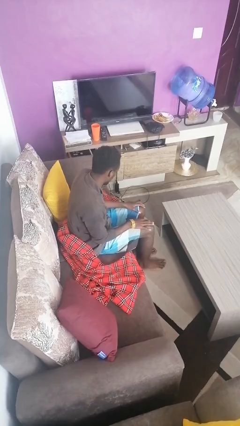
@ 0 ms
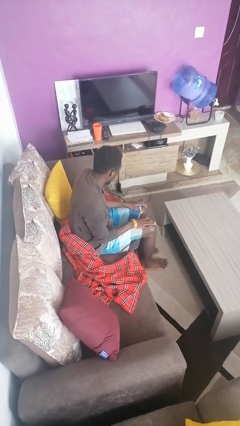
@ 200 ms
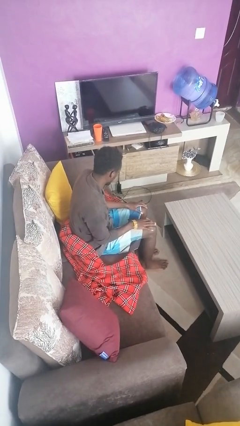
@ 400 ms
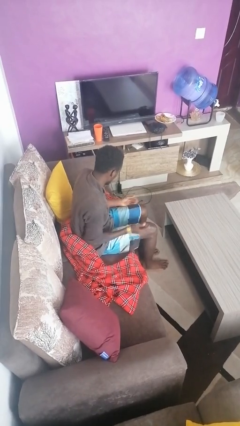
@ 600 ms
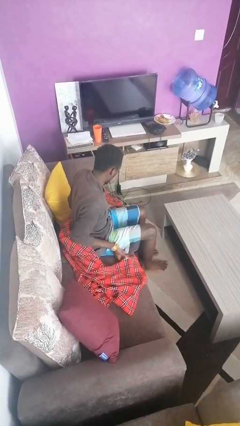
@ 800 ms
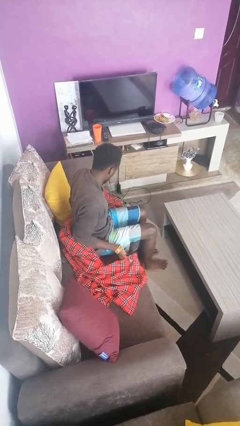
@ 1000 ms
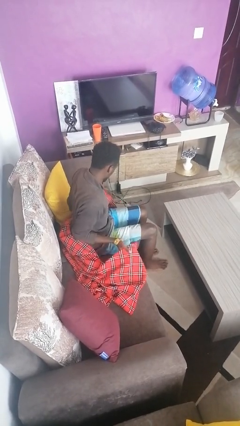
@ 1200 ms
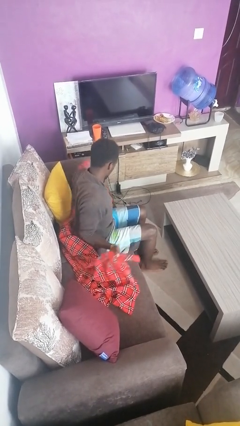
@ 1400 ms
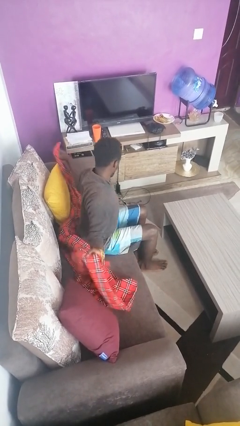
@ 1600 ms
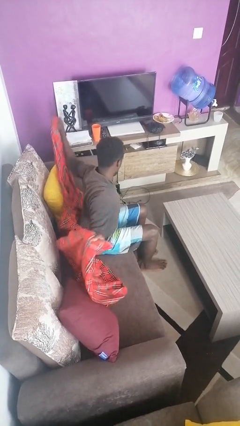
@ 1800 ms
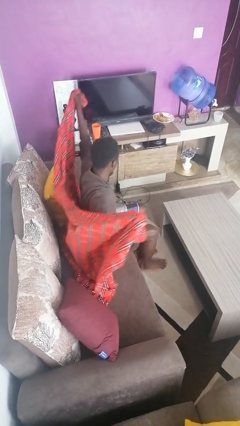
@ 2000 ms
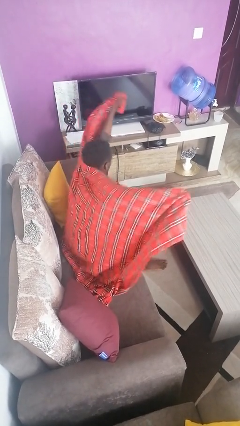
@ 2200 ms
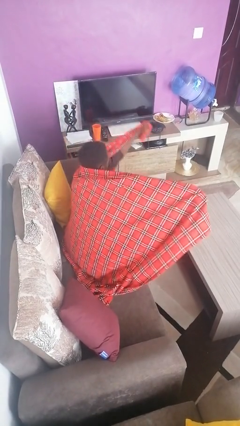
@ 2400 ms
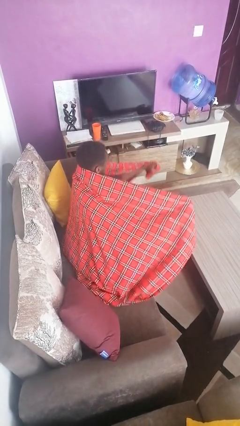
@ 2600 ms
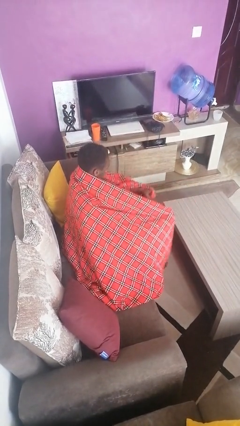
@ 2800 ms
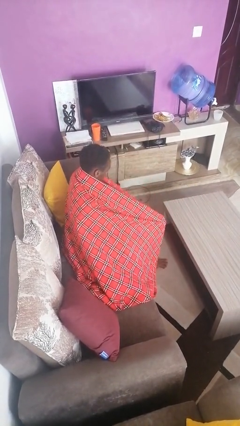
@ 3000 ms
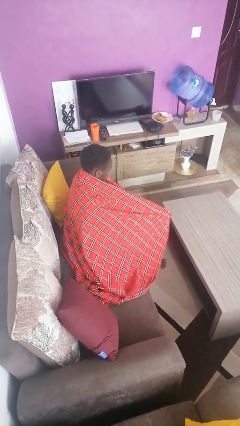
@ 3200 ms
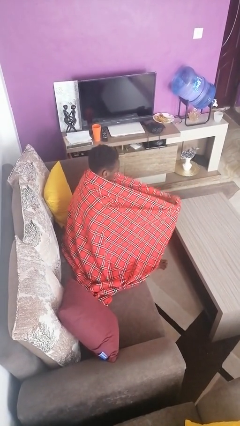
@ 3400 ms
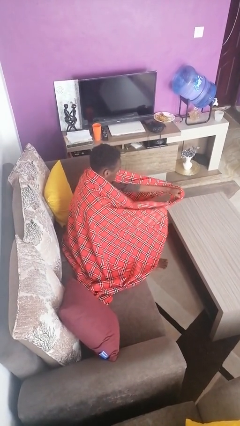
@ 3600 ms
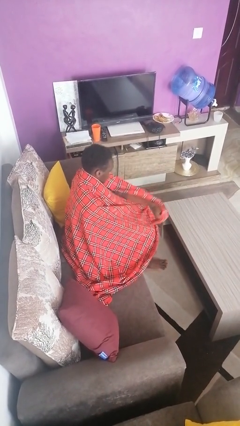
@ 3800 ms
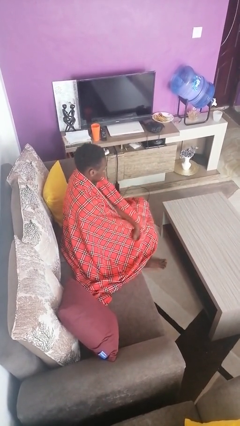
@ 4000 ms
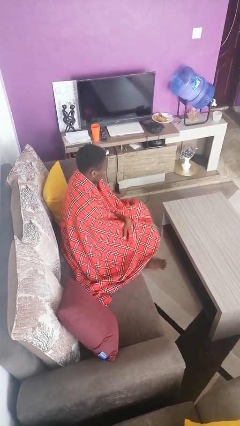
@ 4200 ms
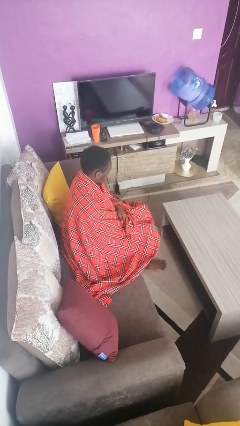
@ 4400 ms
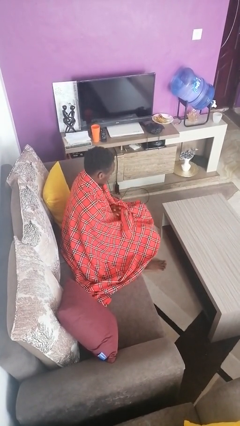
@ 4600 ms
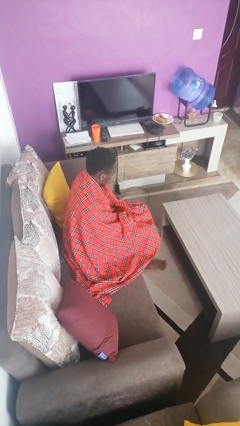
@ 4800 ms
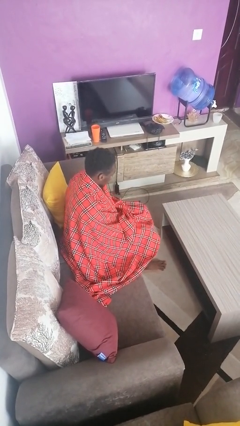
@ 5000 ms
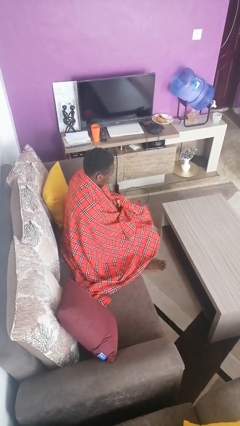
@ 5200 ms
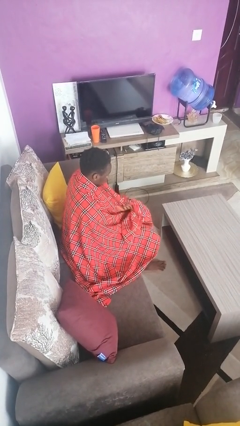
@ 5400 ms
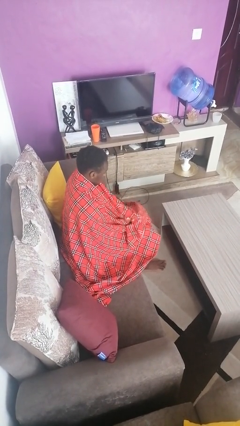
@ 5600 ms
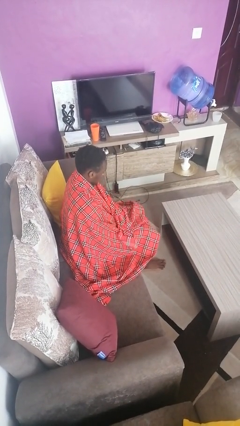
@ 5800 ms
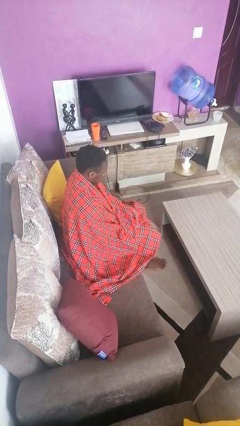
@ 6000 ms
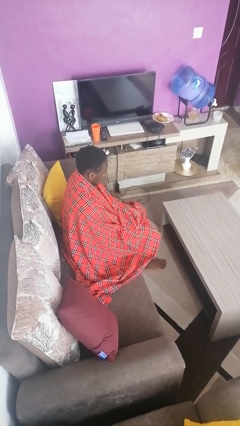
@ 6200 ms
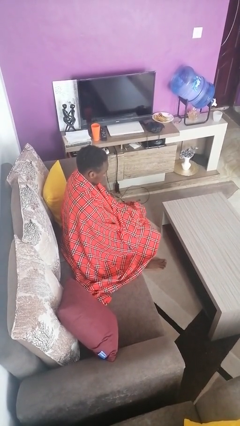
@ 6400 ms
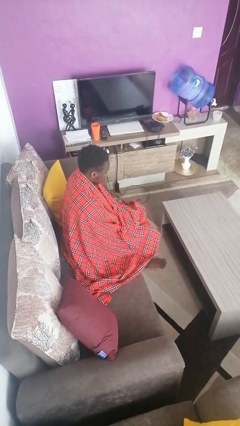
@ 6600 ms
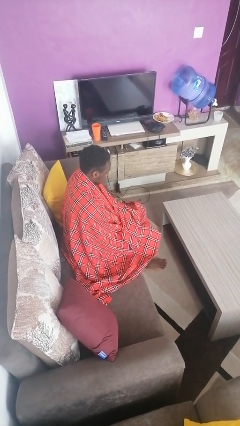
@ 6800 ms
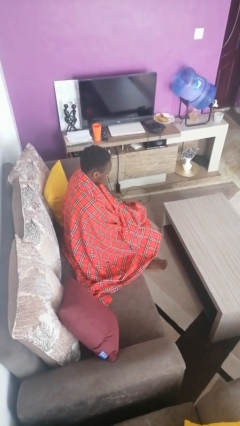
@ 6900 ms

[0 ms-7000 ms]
person covers with blanket

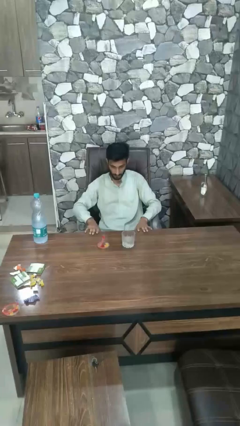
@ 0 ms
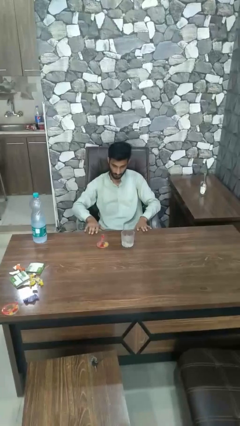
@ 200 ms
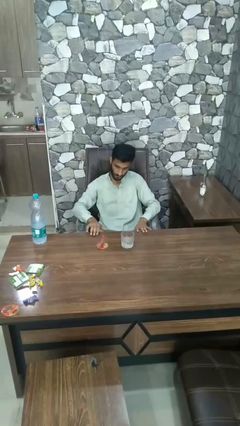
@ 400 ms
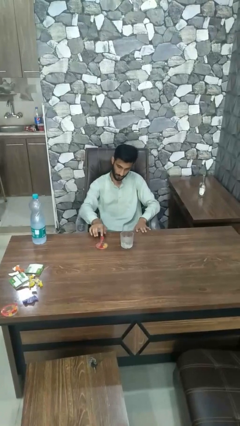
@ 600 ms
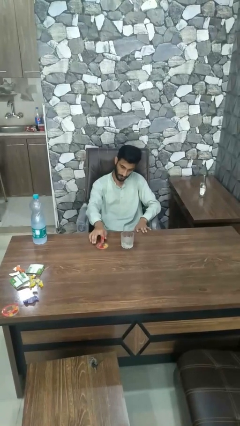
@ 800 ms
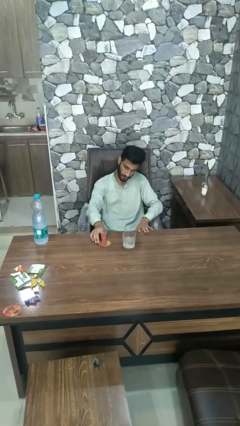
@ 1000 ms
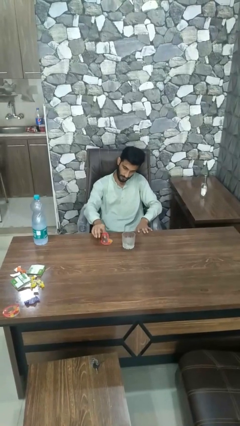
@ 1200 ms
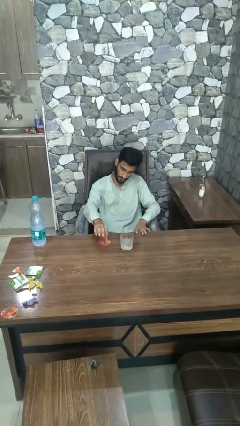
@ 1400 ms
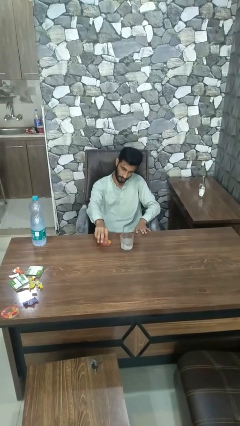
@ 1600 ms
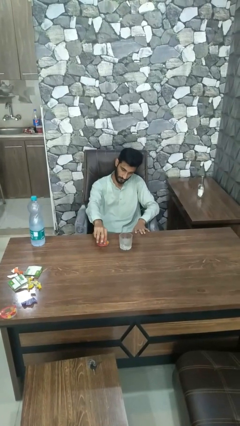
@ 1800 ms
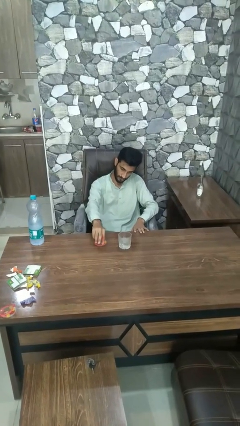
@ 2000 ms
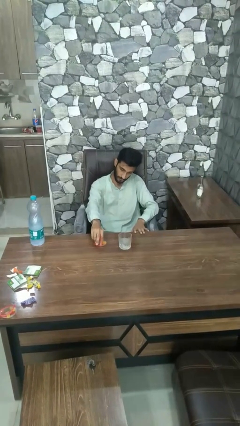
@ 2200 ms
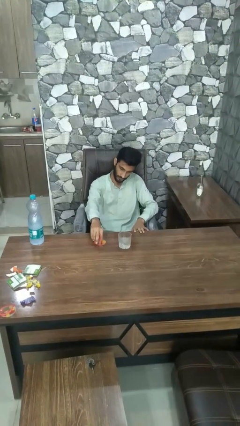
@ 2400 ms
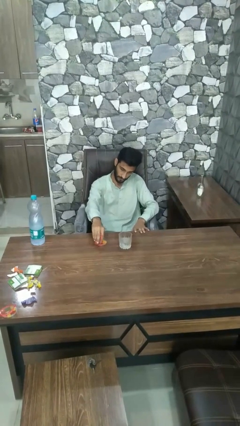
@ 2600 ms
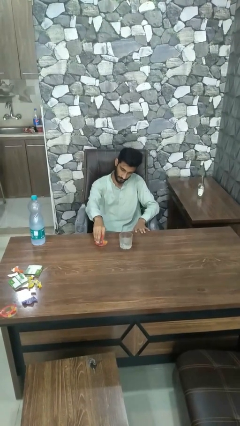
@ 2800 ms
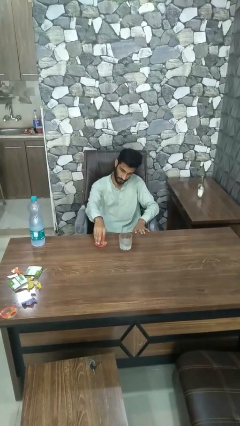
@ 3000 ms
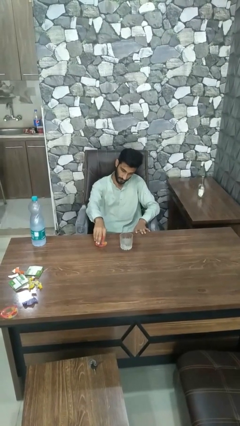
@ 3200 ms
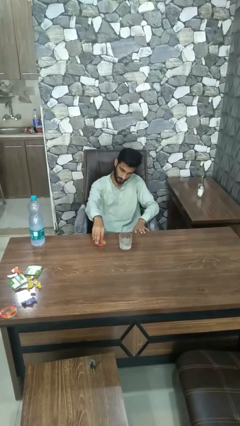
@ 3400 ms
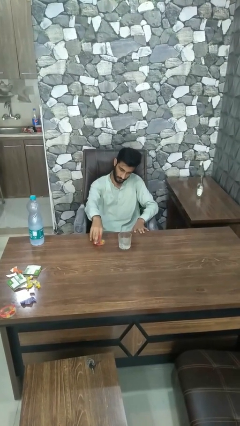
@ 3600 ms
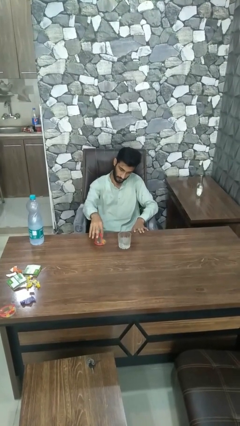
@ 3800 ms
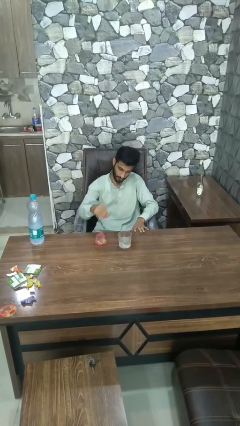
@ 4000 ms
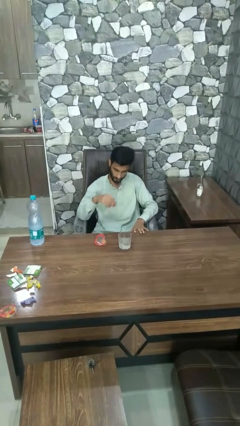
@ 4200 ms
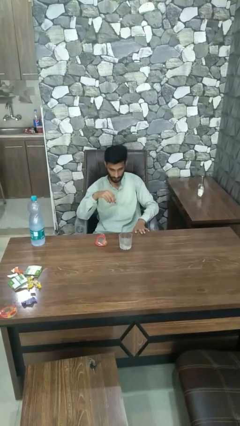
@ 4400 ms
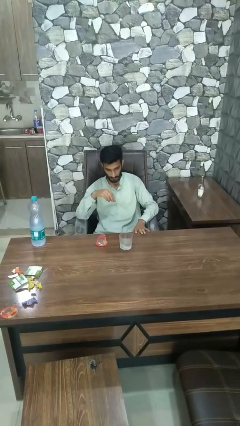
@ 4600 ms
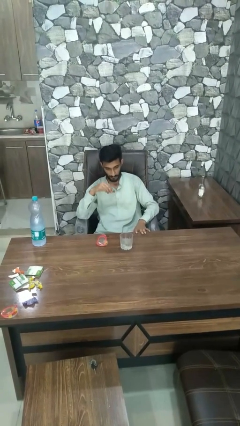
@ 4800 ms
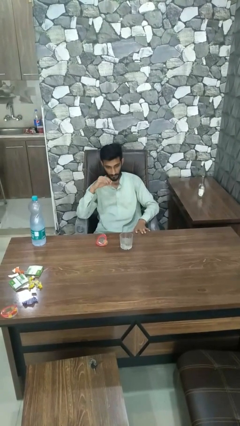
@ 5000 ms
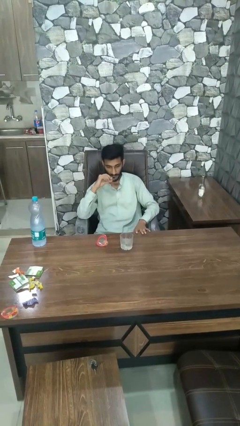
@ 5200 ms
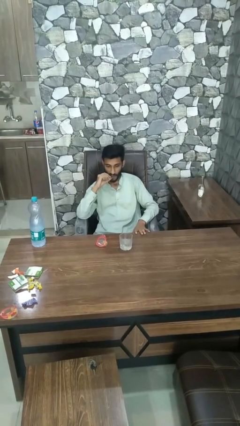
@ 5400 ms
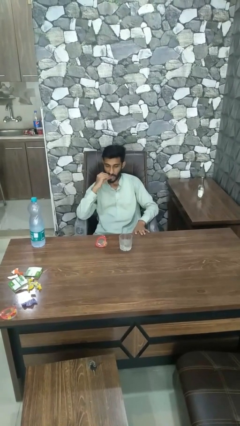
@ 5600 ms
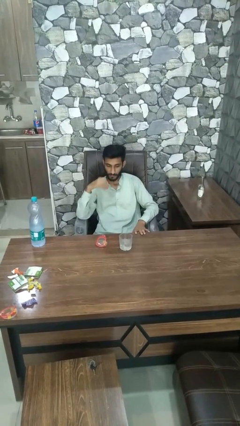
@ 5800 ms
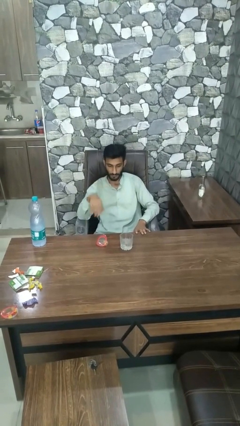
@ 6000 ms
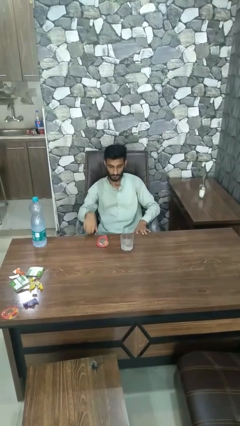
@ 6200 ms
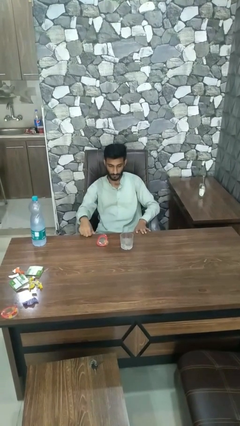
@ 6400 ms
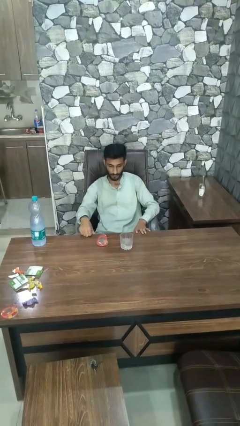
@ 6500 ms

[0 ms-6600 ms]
person takes medicine pills

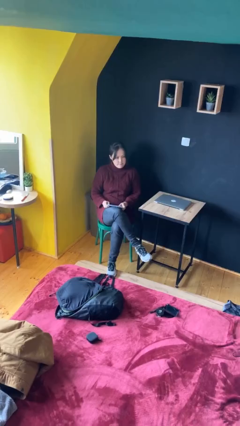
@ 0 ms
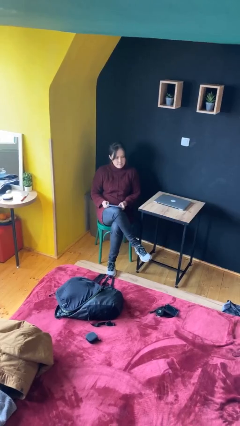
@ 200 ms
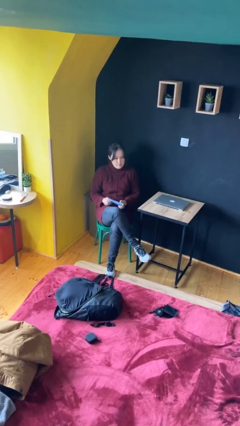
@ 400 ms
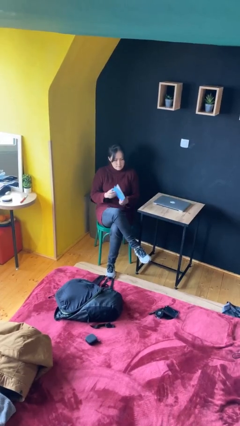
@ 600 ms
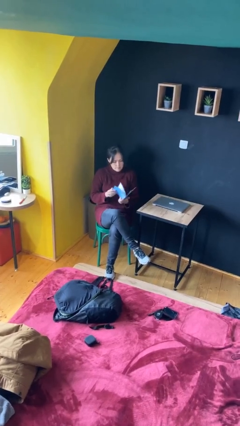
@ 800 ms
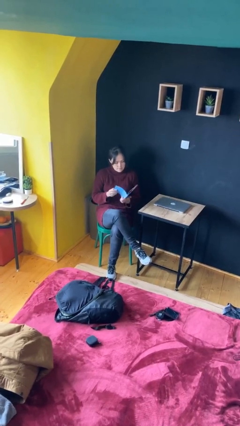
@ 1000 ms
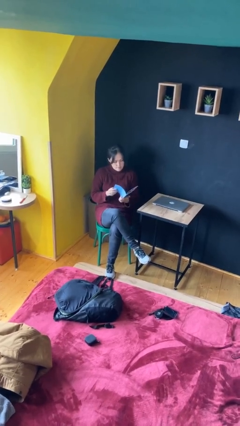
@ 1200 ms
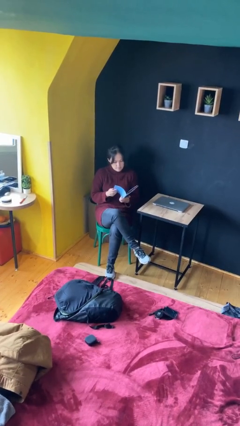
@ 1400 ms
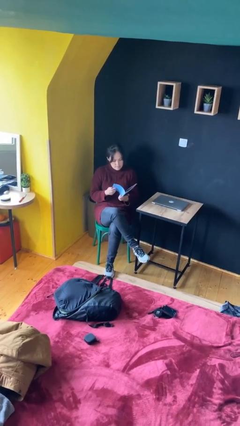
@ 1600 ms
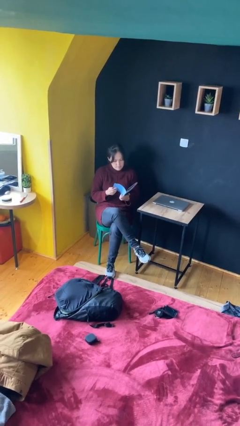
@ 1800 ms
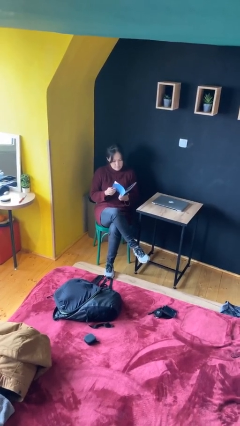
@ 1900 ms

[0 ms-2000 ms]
person reads document

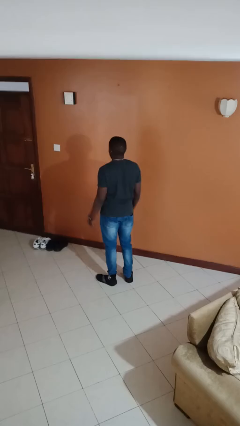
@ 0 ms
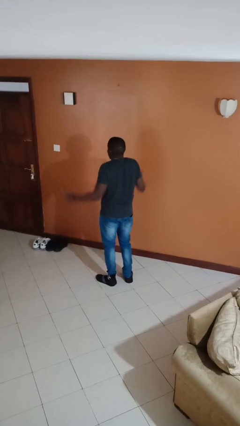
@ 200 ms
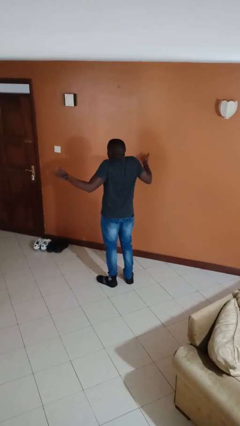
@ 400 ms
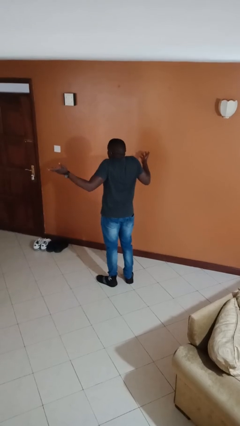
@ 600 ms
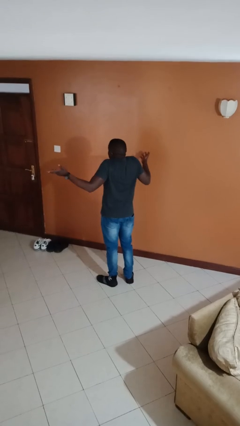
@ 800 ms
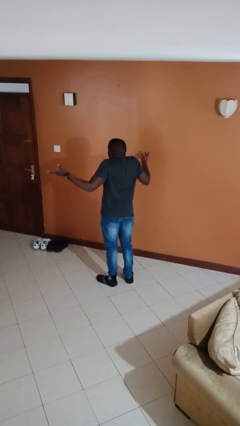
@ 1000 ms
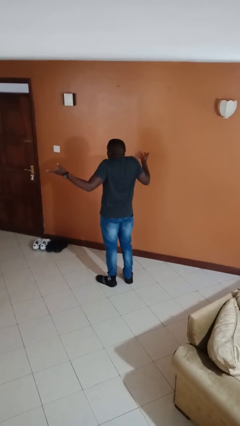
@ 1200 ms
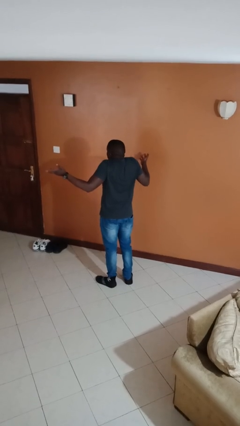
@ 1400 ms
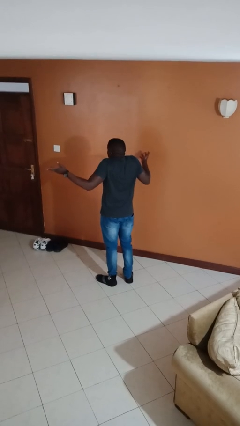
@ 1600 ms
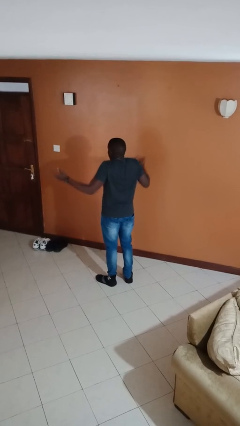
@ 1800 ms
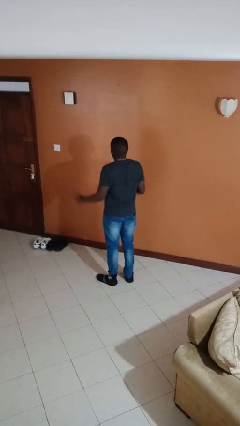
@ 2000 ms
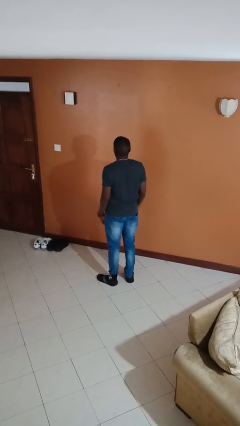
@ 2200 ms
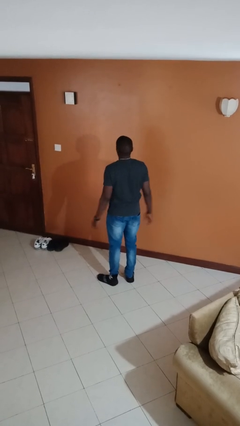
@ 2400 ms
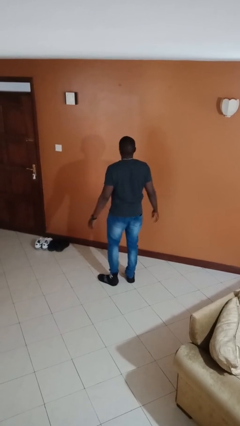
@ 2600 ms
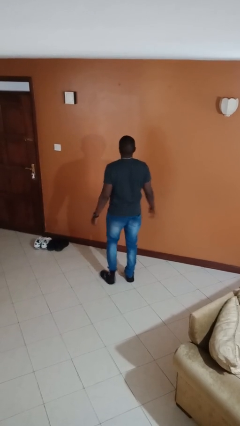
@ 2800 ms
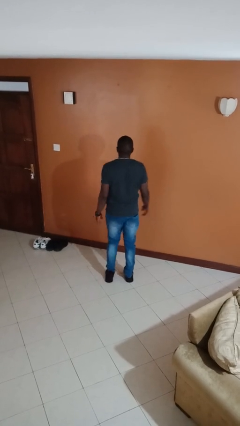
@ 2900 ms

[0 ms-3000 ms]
person shrugs
